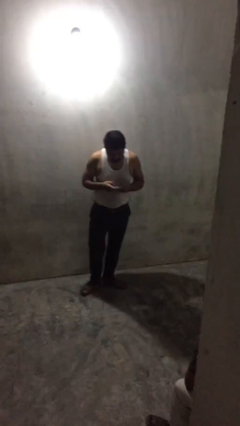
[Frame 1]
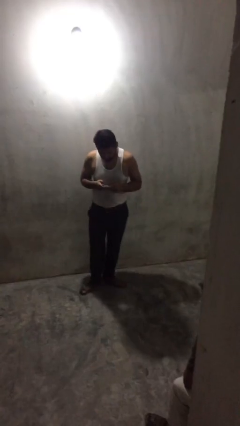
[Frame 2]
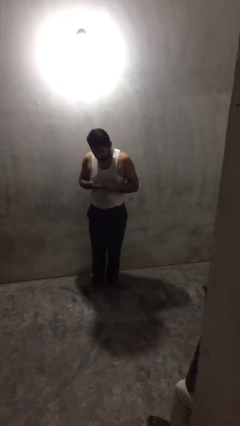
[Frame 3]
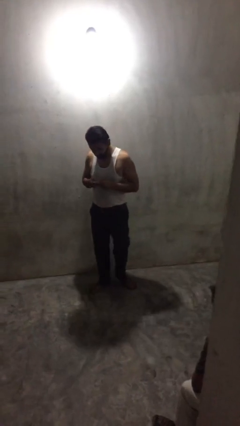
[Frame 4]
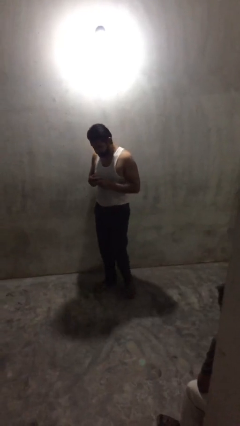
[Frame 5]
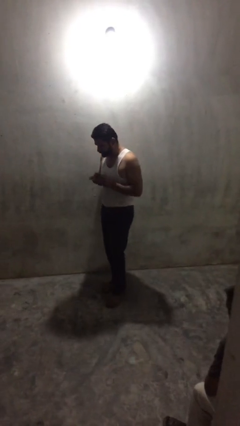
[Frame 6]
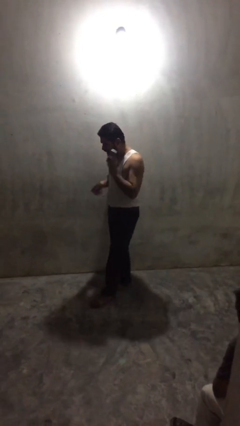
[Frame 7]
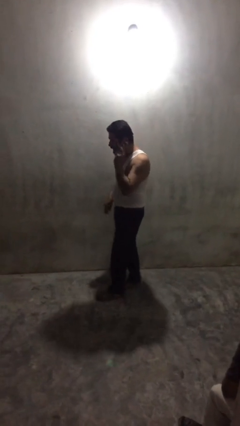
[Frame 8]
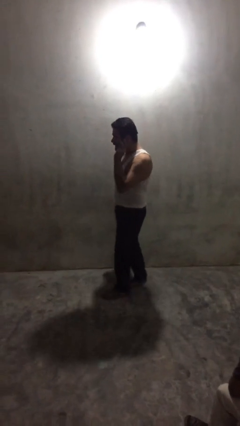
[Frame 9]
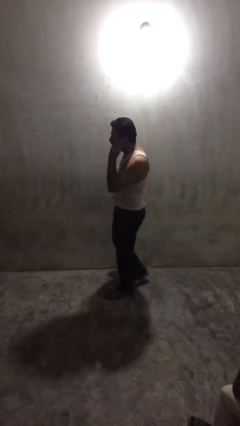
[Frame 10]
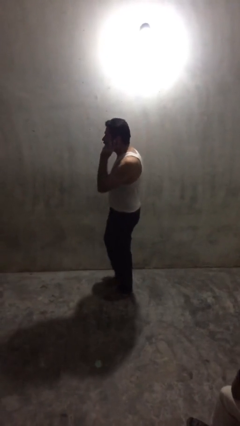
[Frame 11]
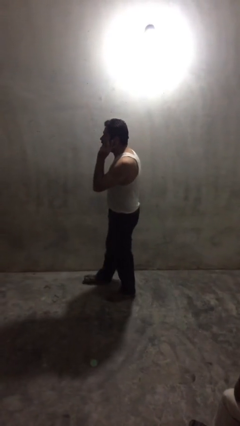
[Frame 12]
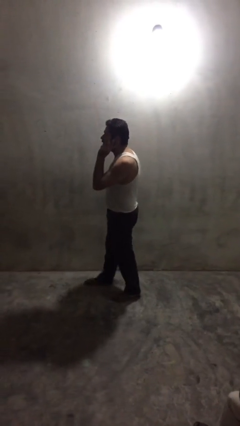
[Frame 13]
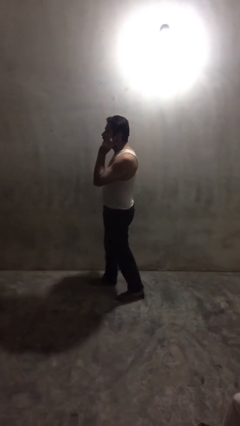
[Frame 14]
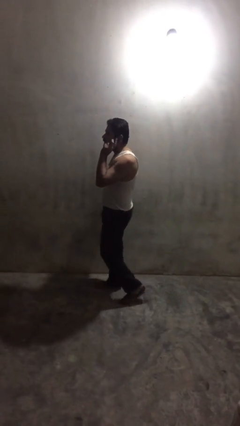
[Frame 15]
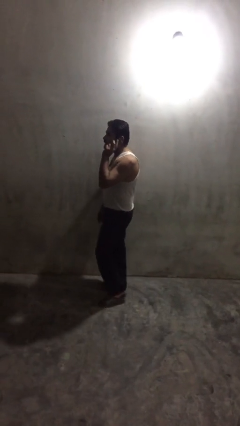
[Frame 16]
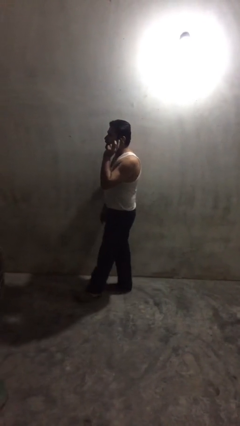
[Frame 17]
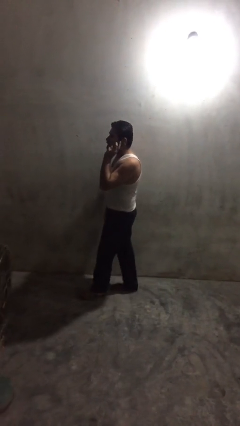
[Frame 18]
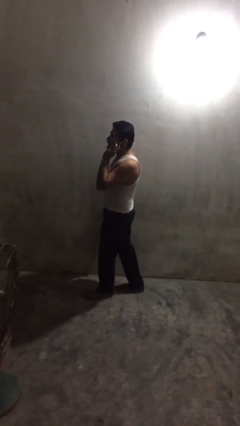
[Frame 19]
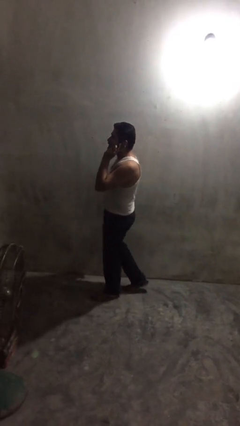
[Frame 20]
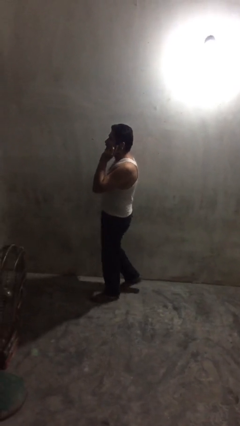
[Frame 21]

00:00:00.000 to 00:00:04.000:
person talks on phone

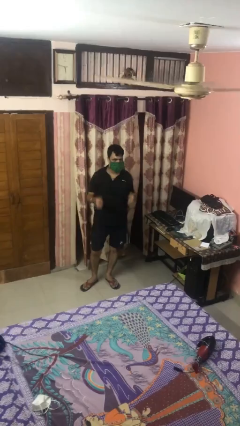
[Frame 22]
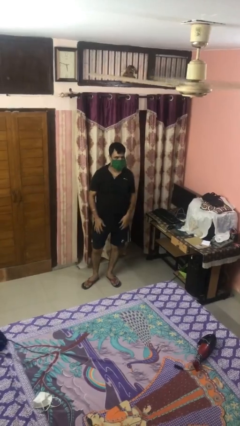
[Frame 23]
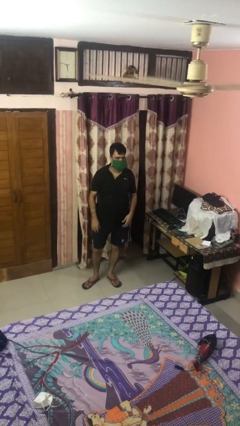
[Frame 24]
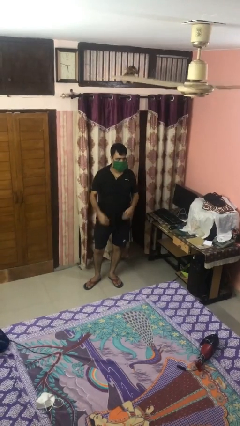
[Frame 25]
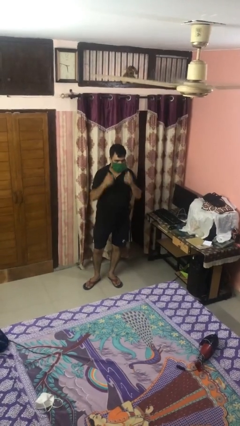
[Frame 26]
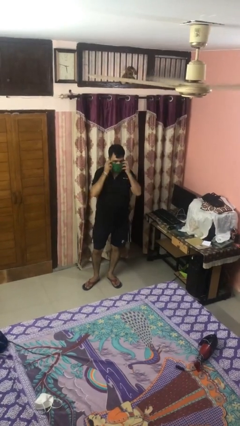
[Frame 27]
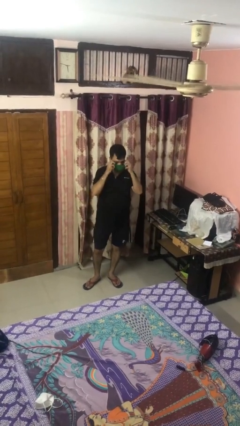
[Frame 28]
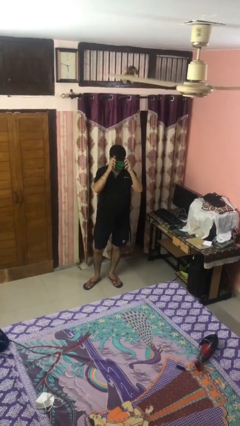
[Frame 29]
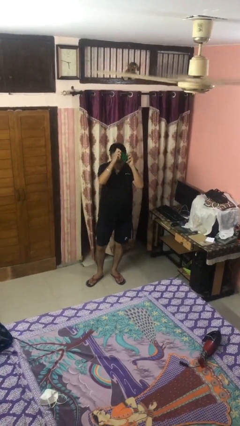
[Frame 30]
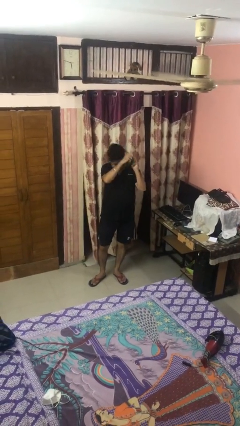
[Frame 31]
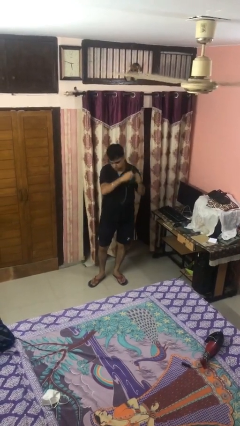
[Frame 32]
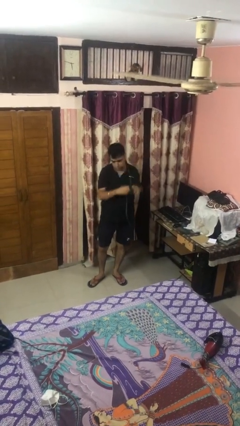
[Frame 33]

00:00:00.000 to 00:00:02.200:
person takes off facemask

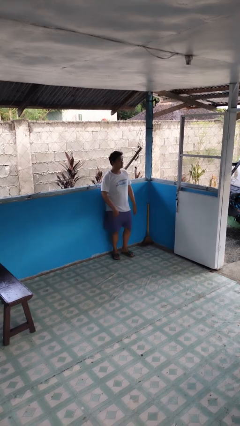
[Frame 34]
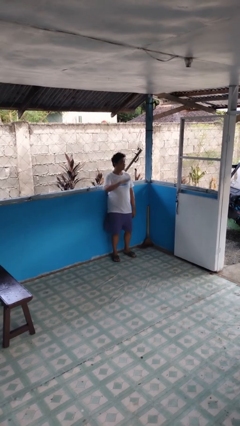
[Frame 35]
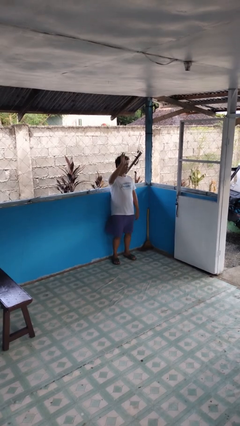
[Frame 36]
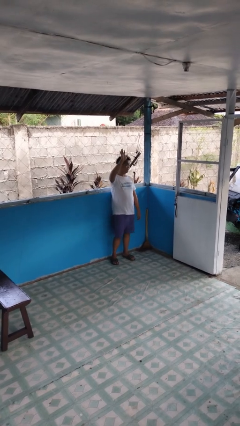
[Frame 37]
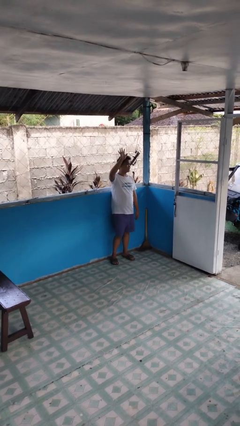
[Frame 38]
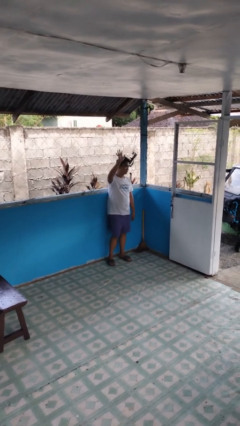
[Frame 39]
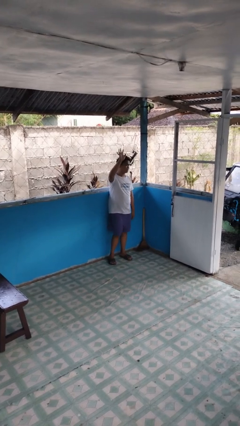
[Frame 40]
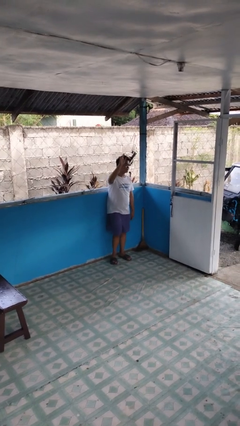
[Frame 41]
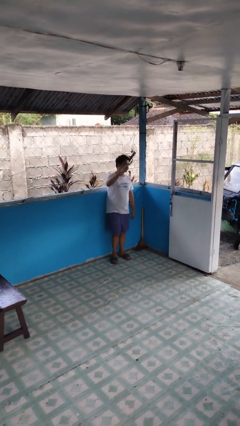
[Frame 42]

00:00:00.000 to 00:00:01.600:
person gestures number five

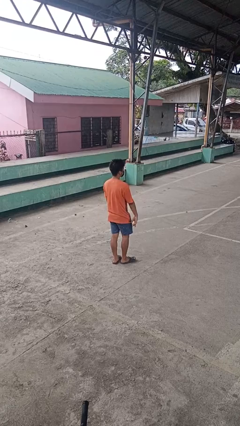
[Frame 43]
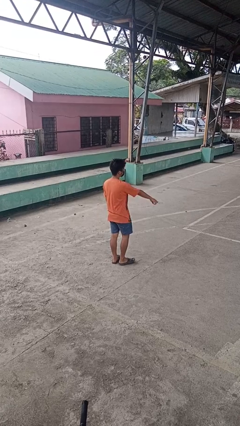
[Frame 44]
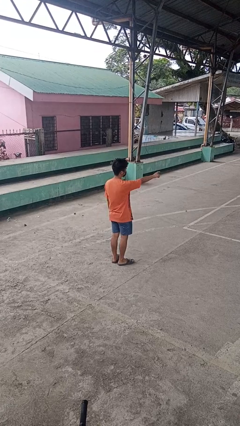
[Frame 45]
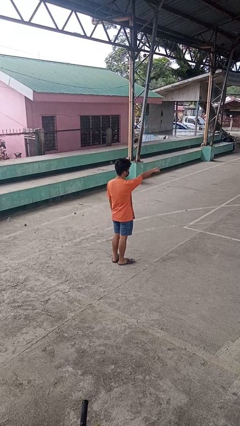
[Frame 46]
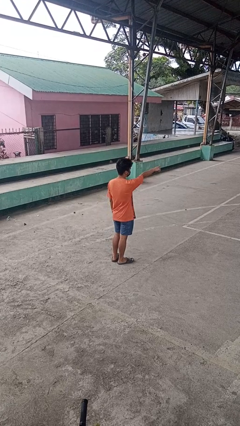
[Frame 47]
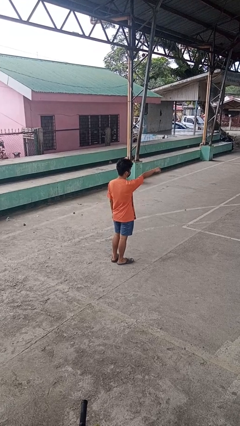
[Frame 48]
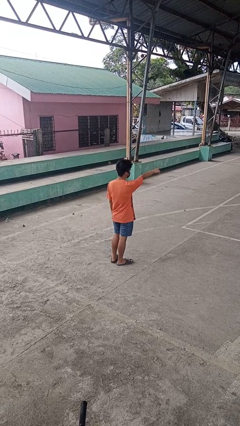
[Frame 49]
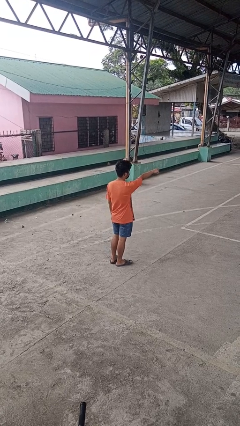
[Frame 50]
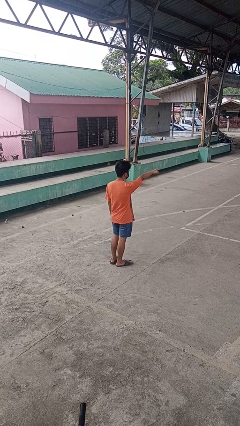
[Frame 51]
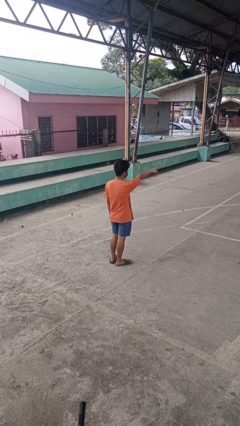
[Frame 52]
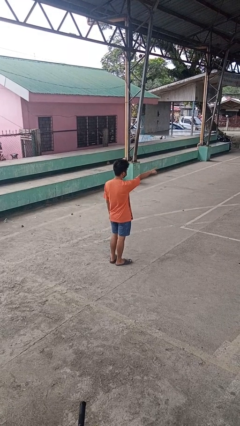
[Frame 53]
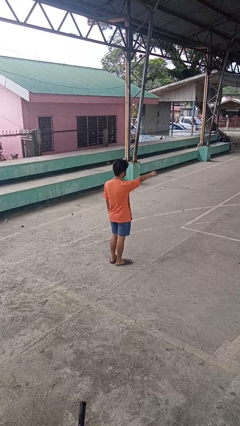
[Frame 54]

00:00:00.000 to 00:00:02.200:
person points at person

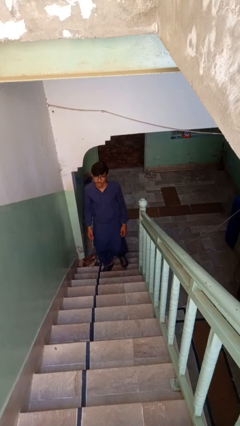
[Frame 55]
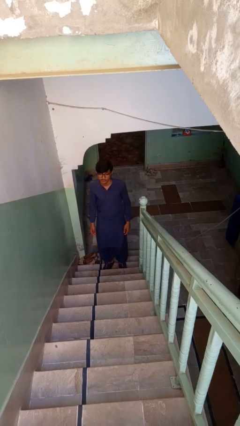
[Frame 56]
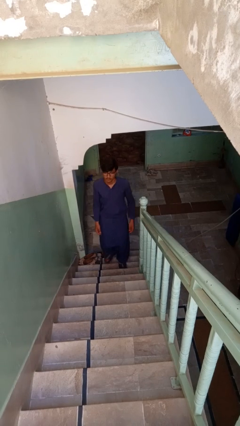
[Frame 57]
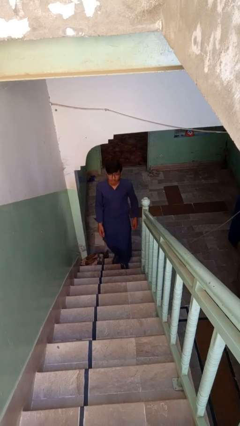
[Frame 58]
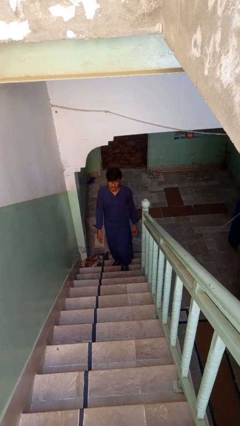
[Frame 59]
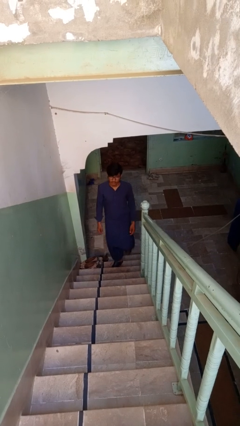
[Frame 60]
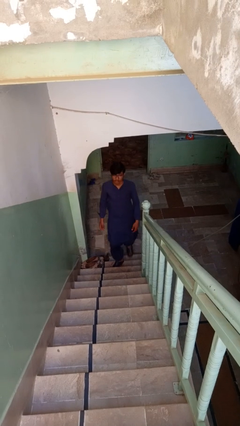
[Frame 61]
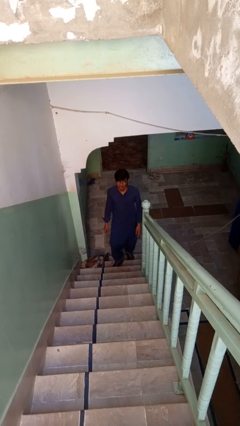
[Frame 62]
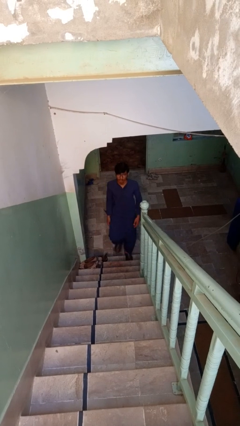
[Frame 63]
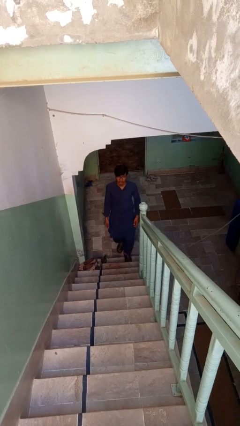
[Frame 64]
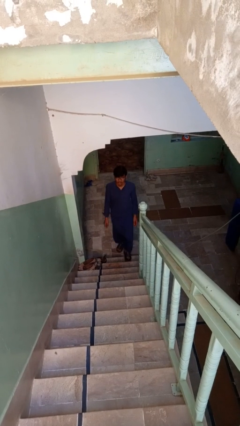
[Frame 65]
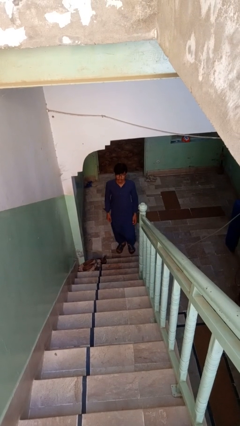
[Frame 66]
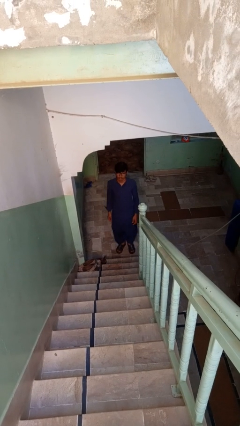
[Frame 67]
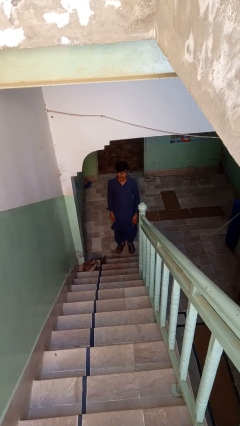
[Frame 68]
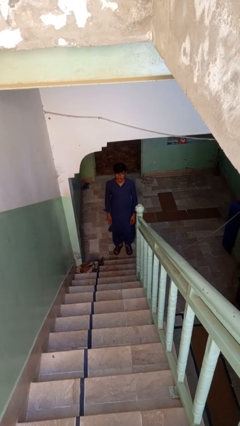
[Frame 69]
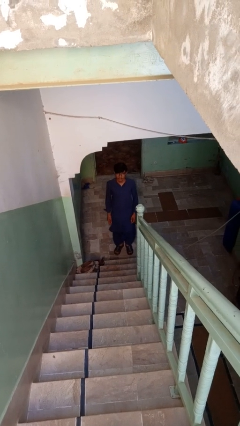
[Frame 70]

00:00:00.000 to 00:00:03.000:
person climbs down stairs

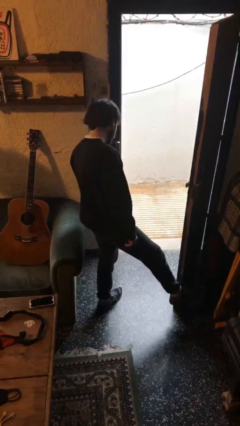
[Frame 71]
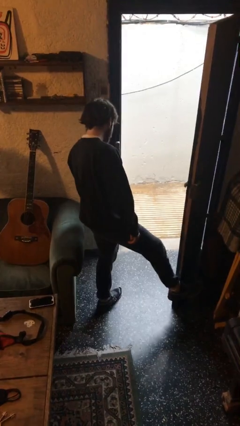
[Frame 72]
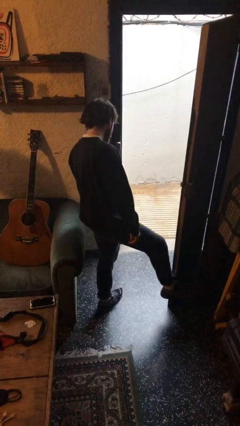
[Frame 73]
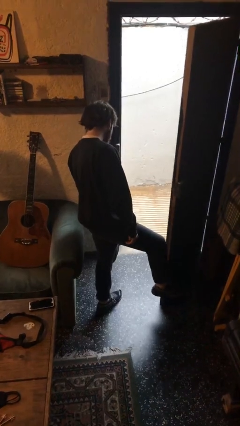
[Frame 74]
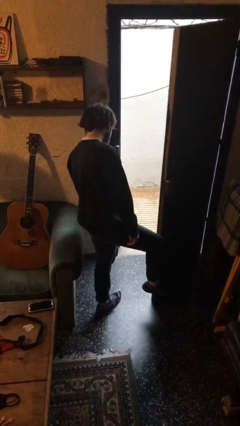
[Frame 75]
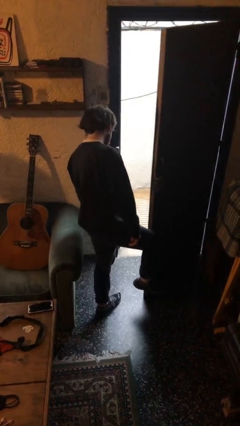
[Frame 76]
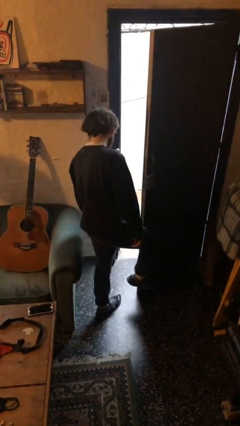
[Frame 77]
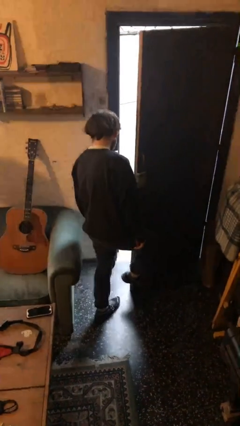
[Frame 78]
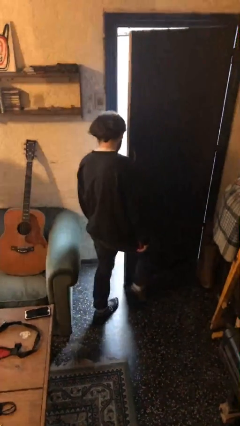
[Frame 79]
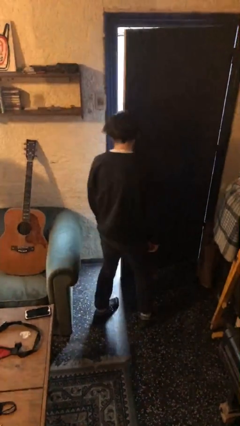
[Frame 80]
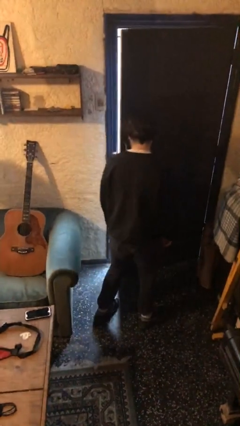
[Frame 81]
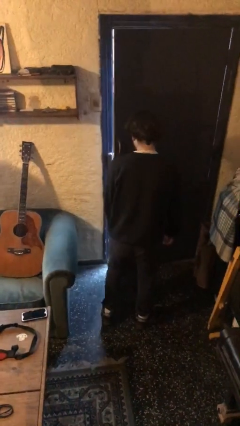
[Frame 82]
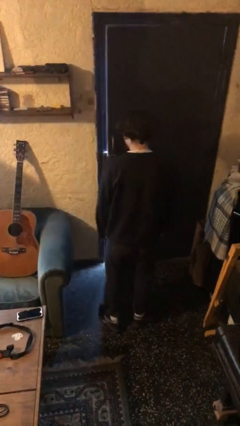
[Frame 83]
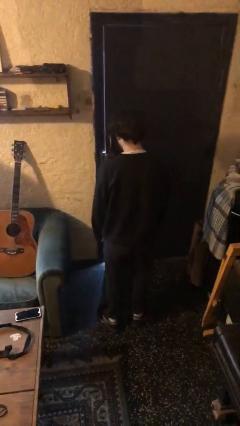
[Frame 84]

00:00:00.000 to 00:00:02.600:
person closes door with foot

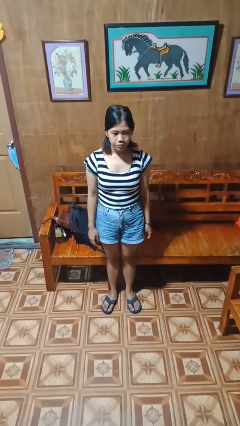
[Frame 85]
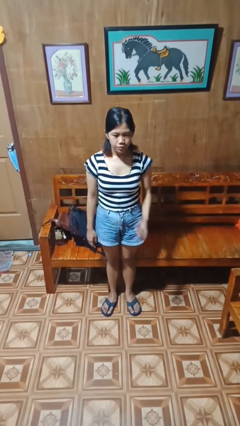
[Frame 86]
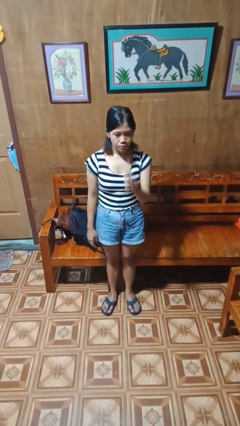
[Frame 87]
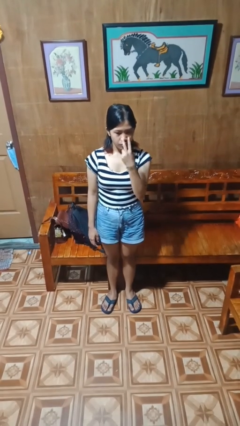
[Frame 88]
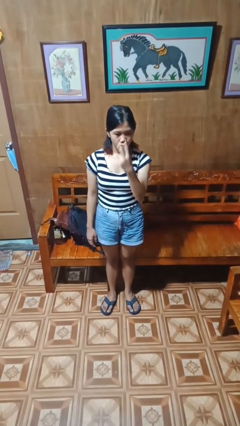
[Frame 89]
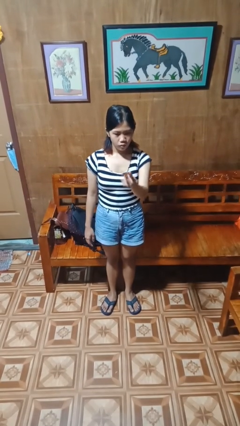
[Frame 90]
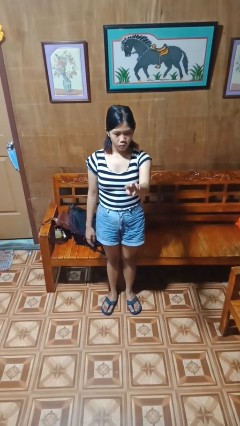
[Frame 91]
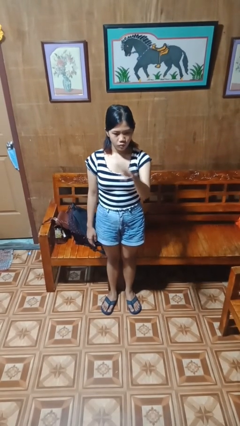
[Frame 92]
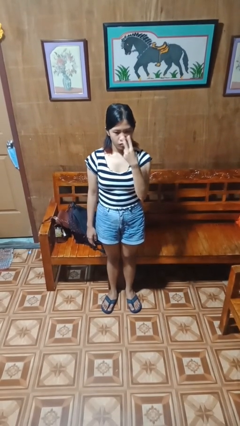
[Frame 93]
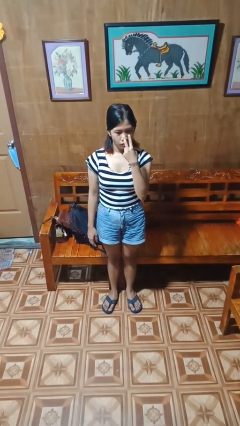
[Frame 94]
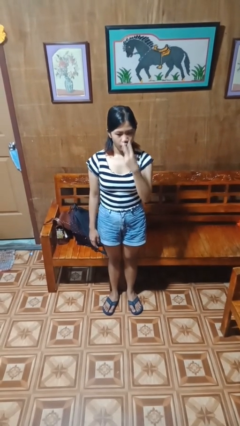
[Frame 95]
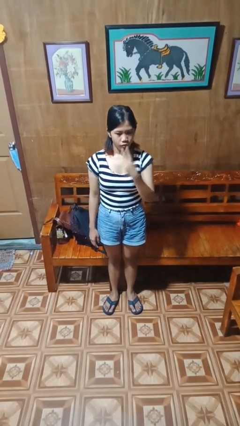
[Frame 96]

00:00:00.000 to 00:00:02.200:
person gestures watch closely
